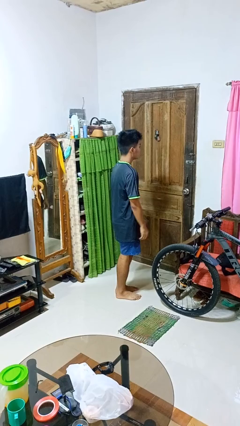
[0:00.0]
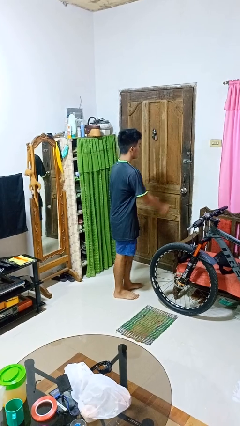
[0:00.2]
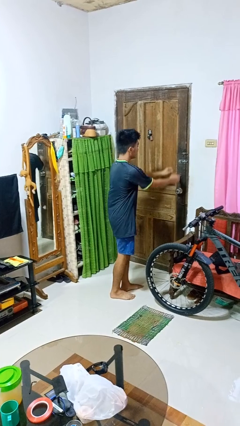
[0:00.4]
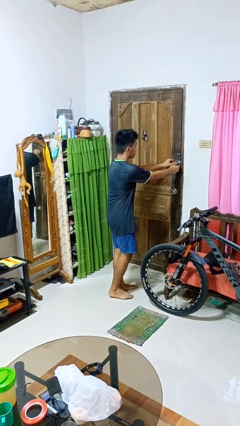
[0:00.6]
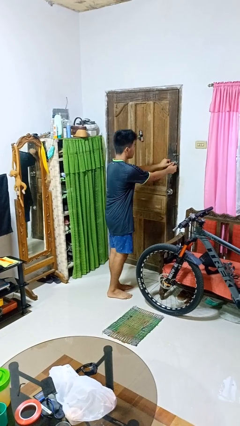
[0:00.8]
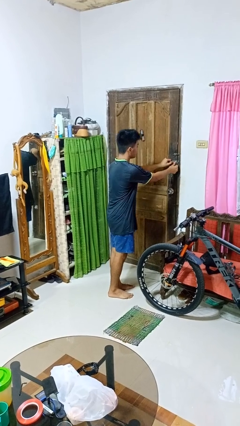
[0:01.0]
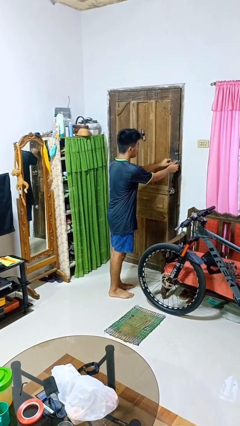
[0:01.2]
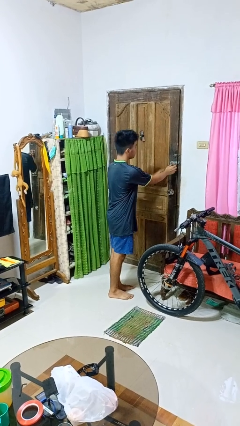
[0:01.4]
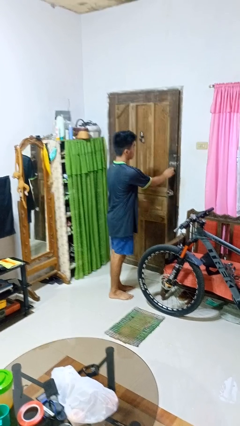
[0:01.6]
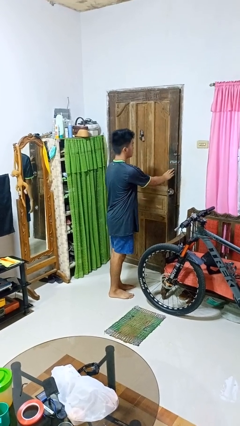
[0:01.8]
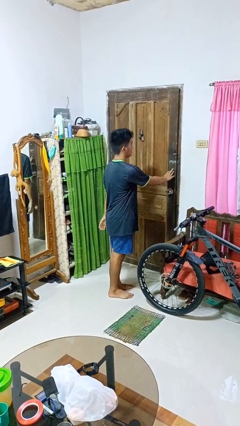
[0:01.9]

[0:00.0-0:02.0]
person unlocks door with keys

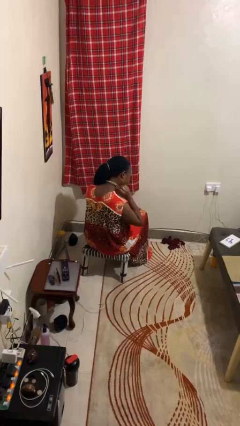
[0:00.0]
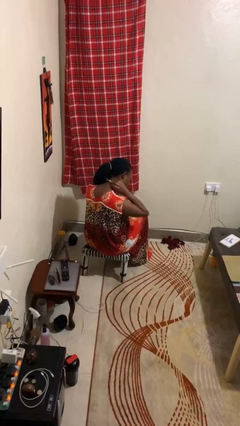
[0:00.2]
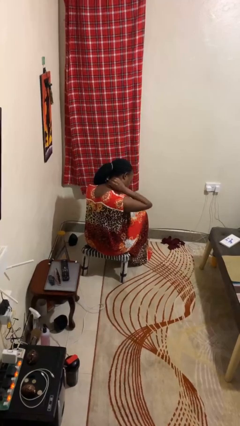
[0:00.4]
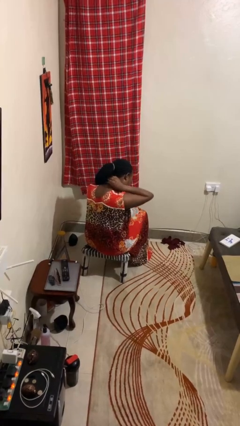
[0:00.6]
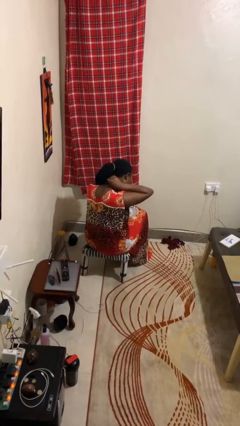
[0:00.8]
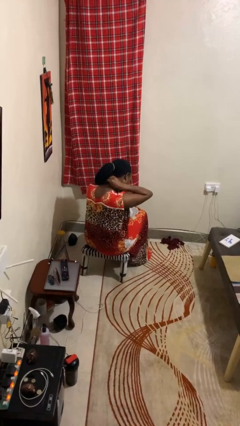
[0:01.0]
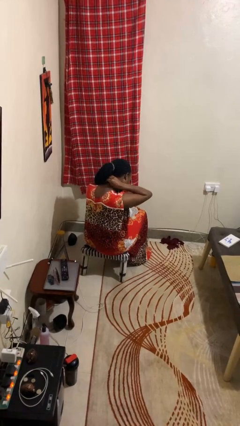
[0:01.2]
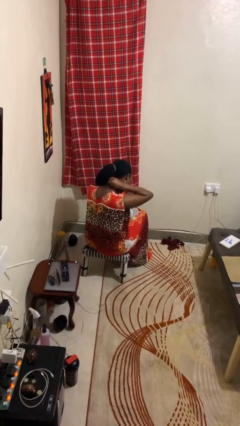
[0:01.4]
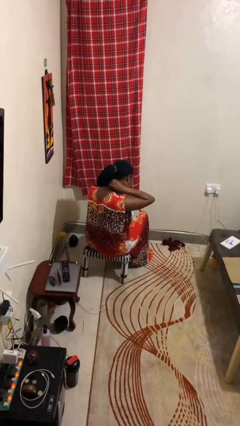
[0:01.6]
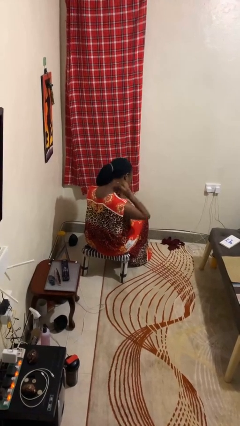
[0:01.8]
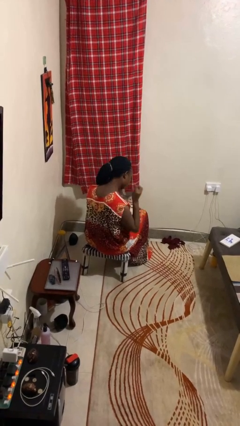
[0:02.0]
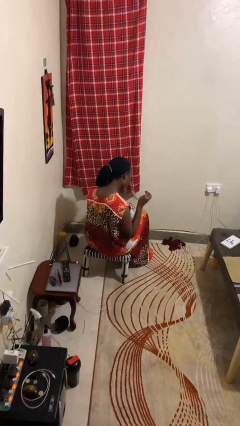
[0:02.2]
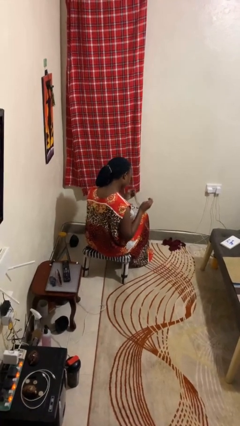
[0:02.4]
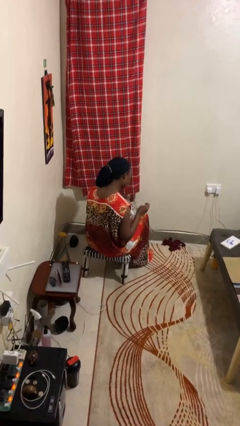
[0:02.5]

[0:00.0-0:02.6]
person takes off necklace

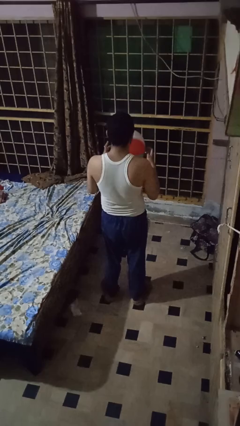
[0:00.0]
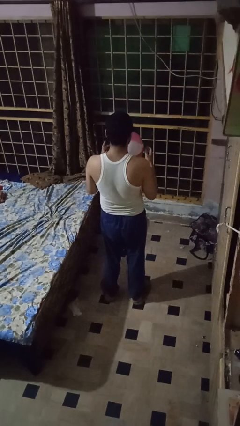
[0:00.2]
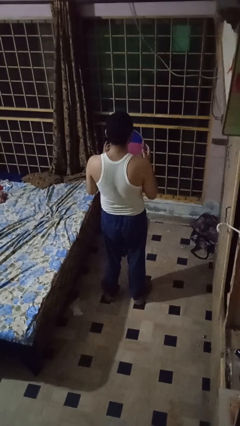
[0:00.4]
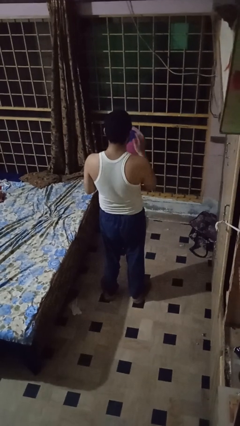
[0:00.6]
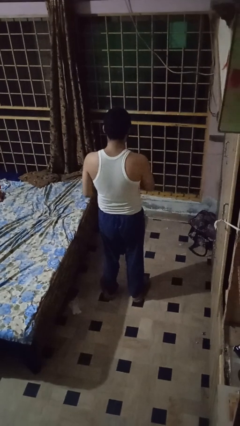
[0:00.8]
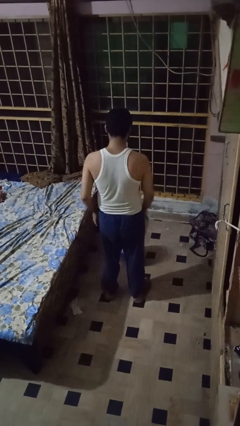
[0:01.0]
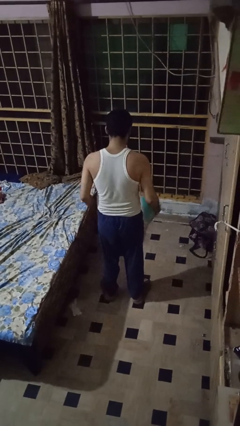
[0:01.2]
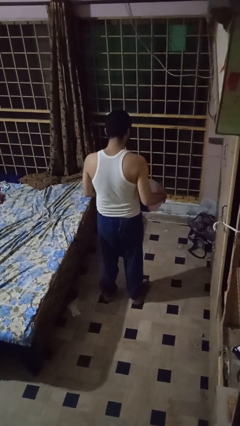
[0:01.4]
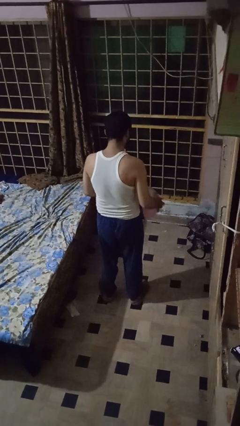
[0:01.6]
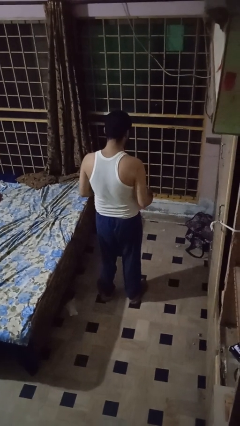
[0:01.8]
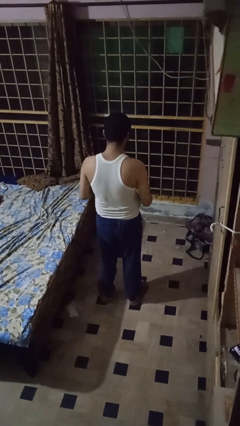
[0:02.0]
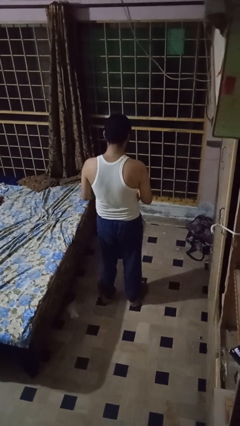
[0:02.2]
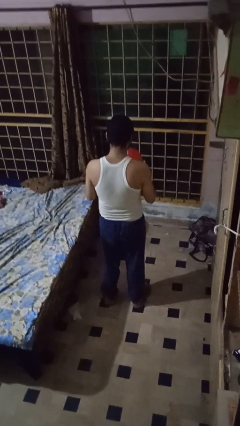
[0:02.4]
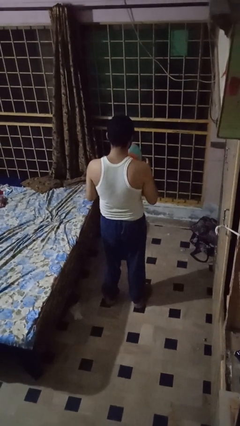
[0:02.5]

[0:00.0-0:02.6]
person bounces ball on floor

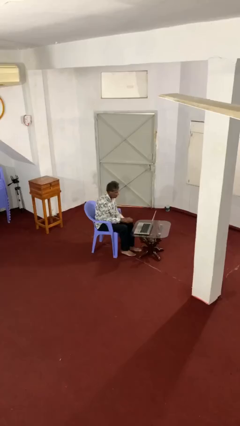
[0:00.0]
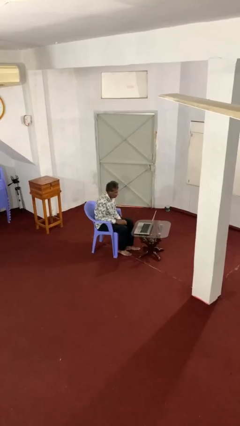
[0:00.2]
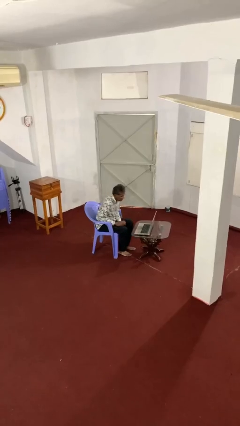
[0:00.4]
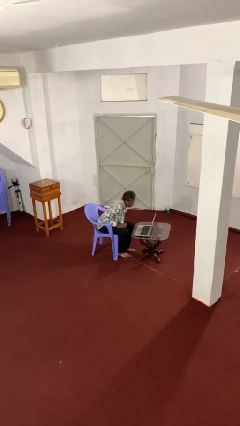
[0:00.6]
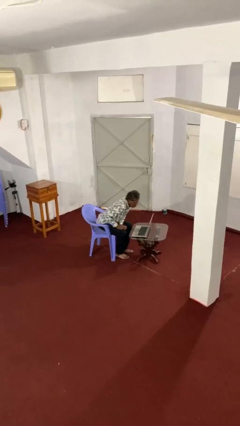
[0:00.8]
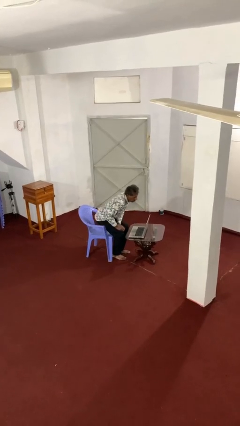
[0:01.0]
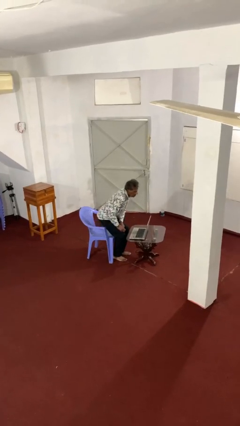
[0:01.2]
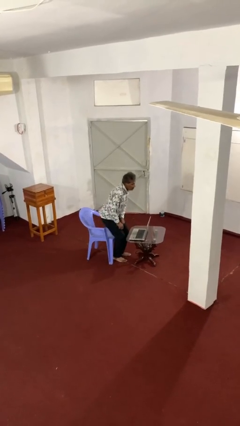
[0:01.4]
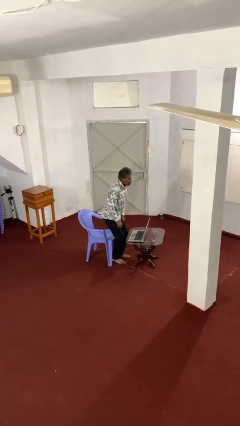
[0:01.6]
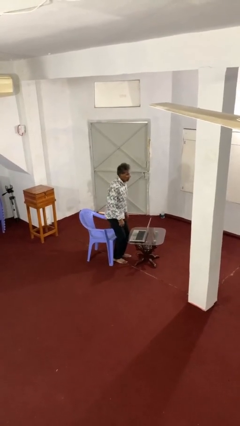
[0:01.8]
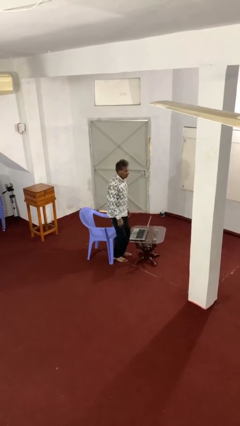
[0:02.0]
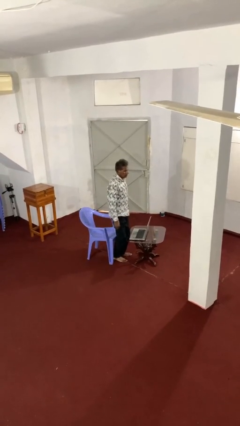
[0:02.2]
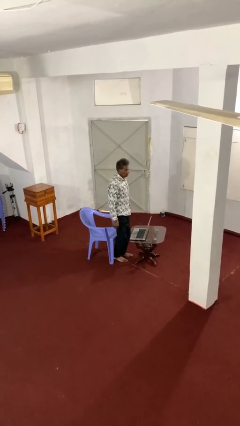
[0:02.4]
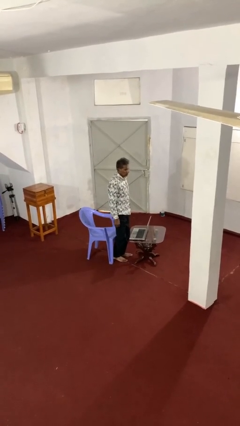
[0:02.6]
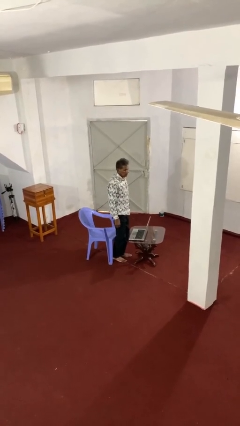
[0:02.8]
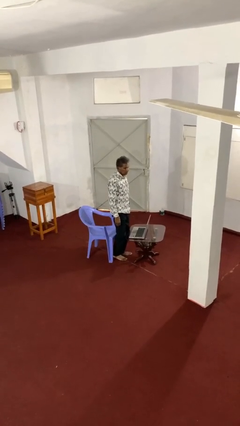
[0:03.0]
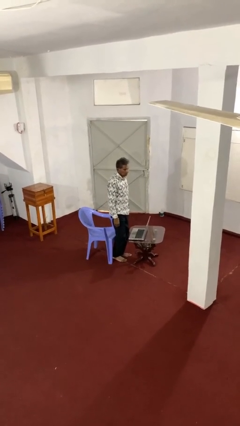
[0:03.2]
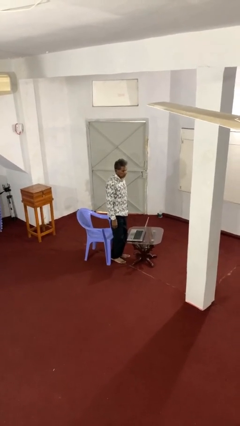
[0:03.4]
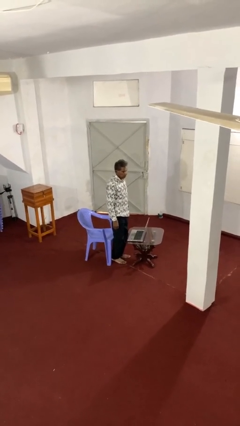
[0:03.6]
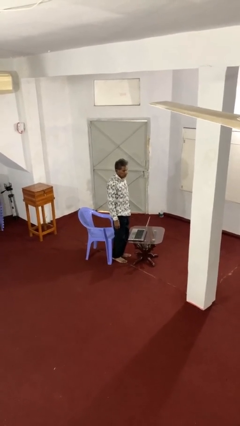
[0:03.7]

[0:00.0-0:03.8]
person stands up

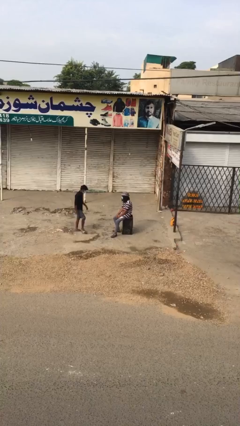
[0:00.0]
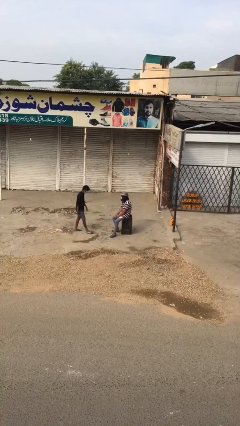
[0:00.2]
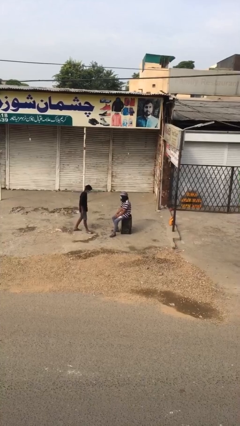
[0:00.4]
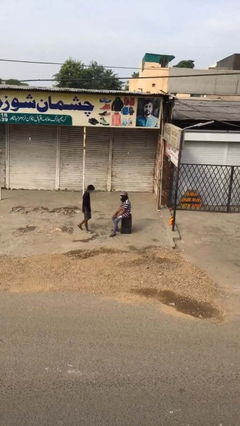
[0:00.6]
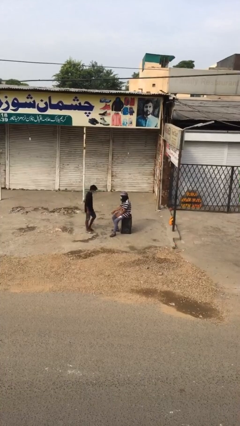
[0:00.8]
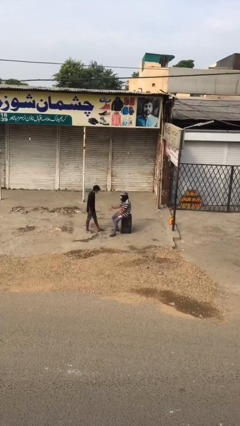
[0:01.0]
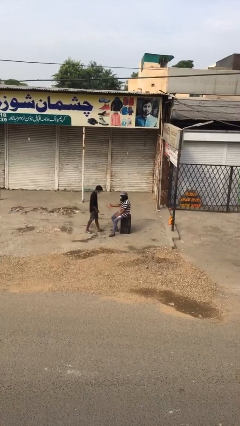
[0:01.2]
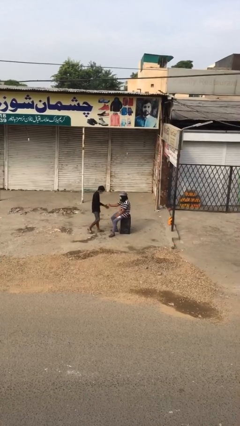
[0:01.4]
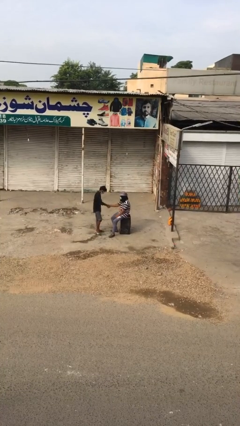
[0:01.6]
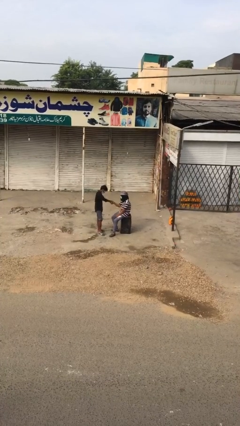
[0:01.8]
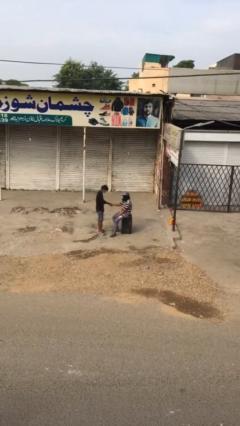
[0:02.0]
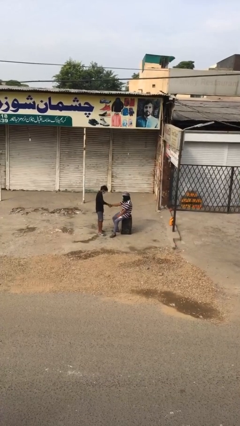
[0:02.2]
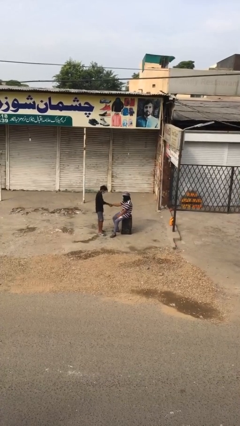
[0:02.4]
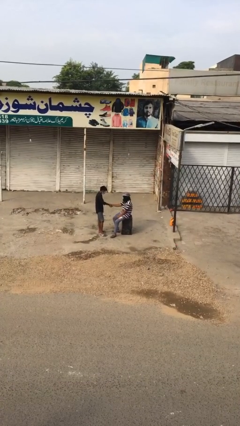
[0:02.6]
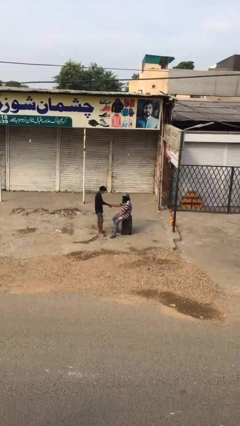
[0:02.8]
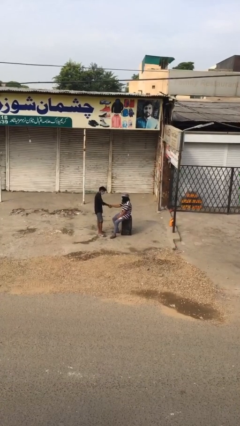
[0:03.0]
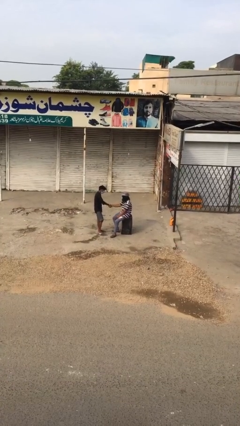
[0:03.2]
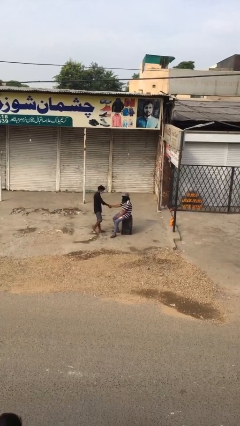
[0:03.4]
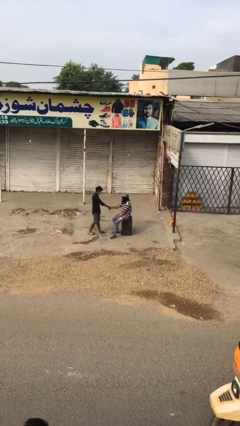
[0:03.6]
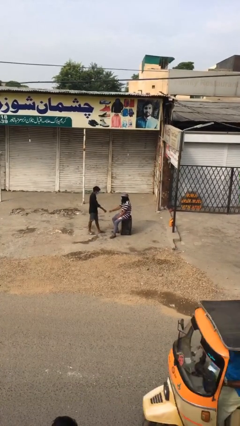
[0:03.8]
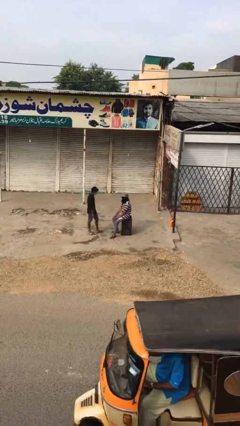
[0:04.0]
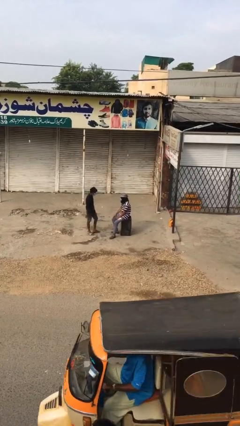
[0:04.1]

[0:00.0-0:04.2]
person shakes hand

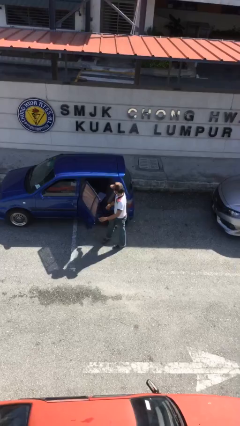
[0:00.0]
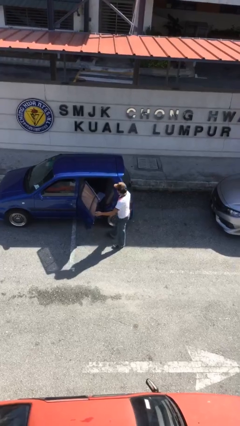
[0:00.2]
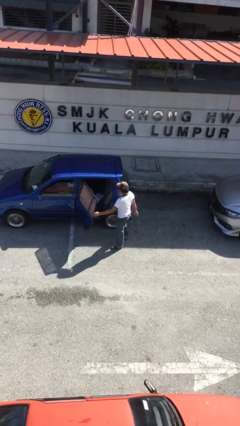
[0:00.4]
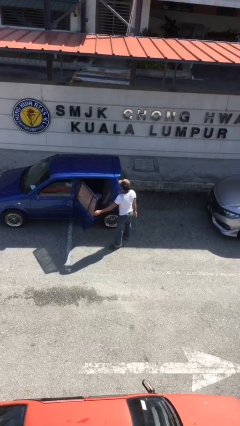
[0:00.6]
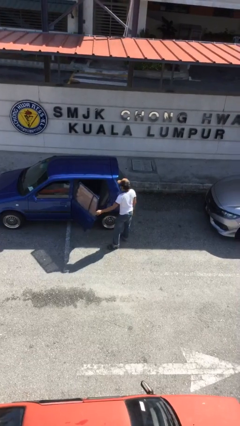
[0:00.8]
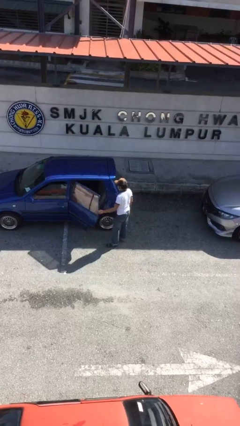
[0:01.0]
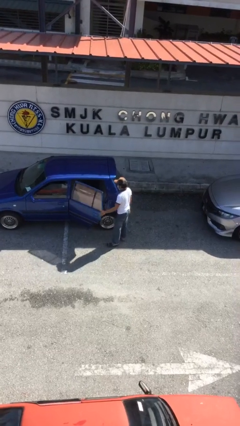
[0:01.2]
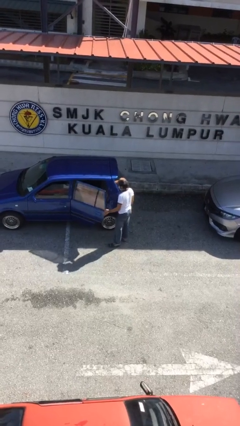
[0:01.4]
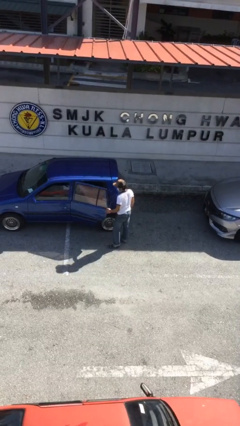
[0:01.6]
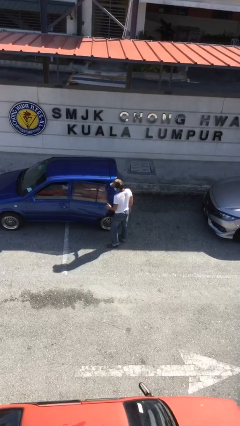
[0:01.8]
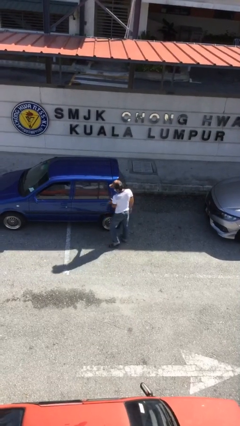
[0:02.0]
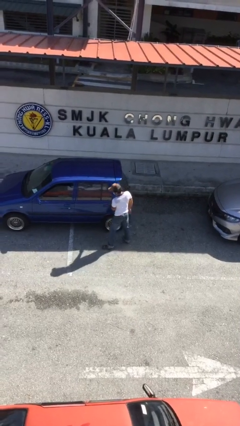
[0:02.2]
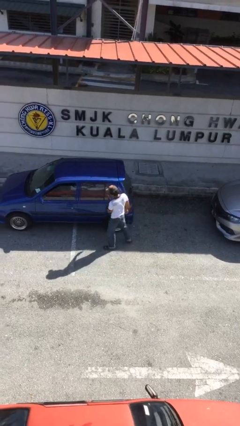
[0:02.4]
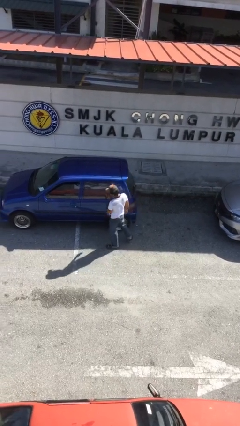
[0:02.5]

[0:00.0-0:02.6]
person closes car door
